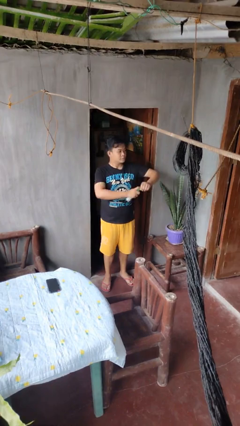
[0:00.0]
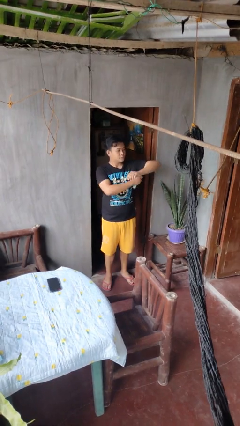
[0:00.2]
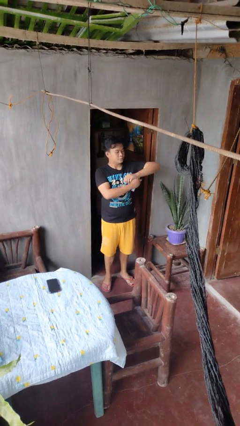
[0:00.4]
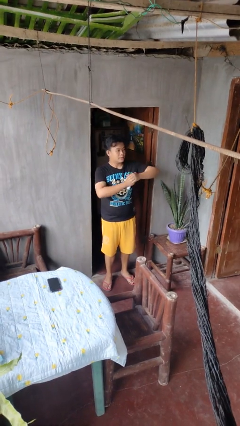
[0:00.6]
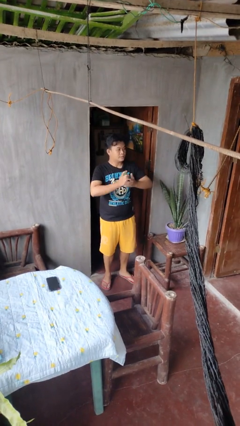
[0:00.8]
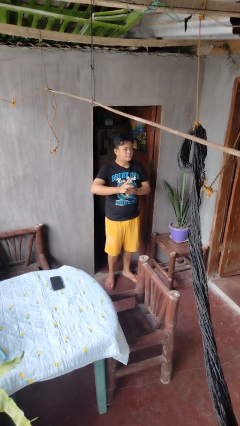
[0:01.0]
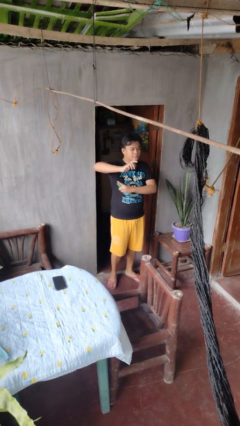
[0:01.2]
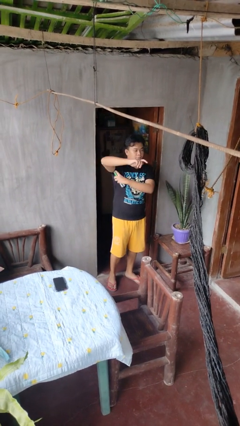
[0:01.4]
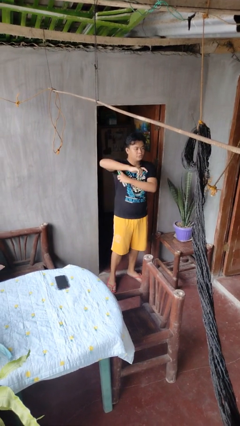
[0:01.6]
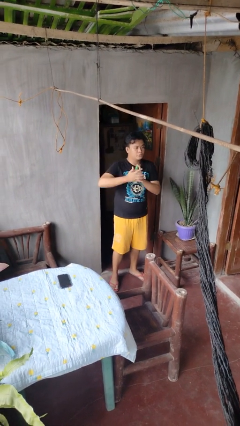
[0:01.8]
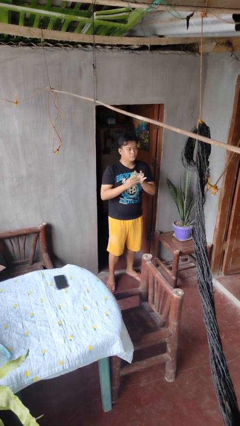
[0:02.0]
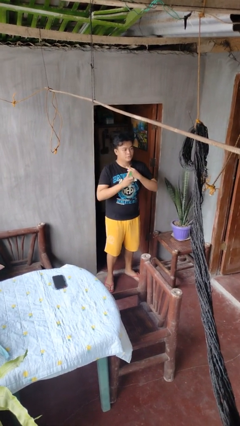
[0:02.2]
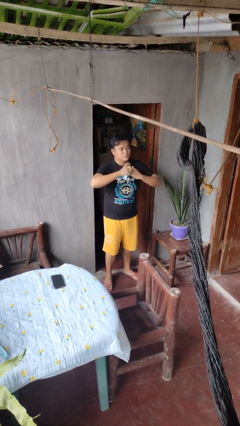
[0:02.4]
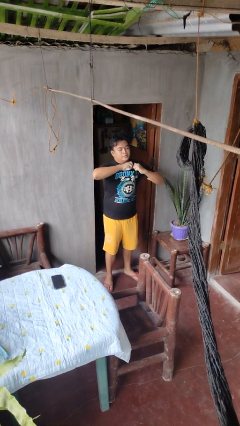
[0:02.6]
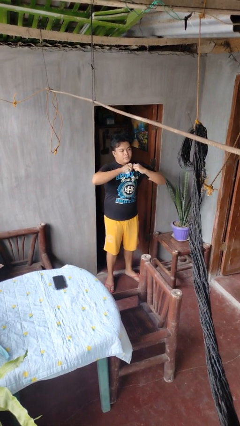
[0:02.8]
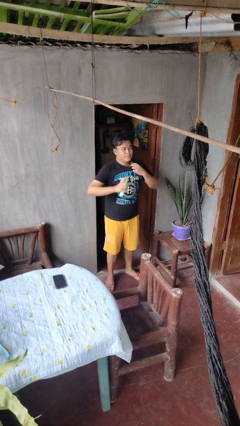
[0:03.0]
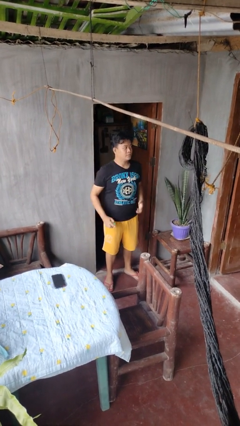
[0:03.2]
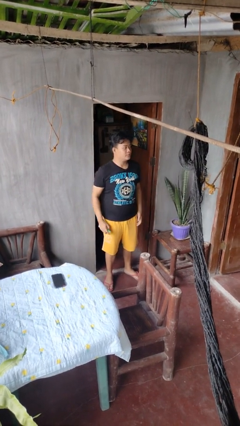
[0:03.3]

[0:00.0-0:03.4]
person applies deodorant

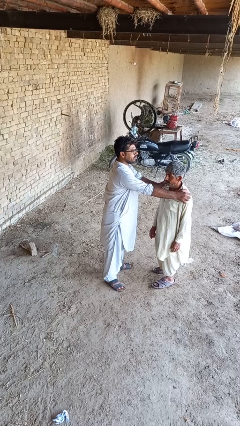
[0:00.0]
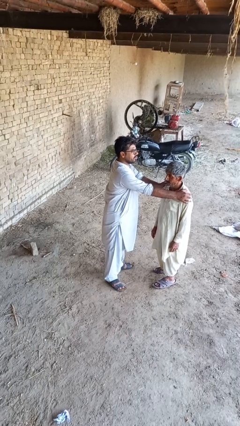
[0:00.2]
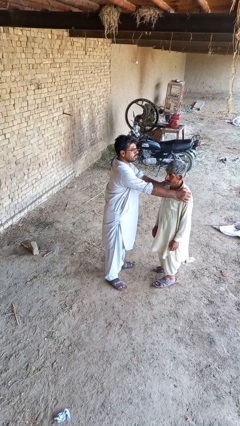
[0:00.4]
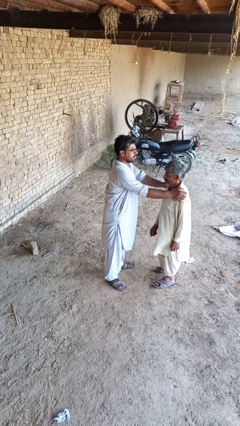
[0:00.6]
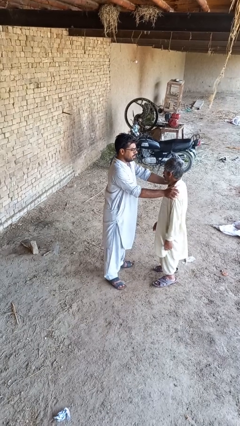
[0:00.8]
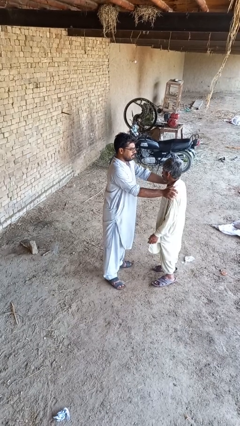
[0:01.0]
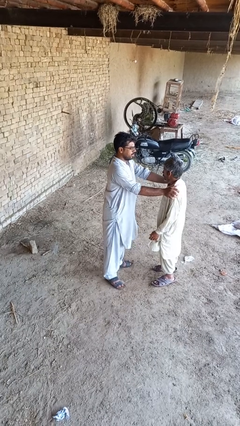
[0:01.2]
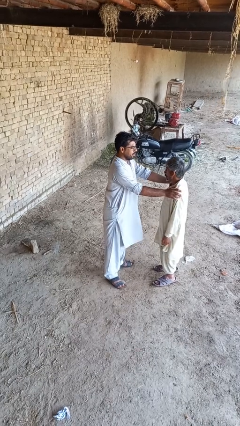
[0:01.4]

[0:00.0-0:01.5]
person spins person around

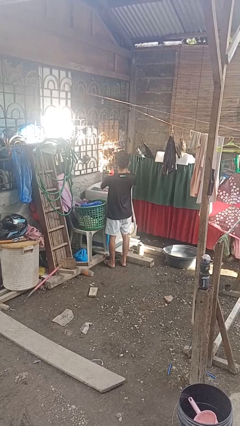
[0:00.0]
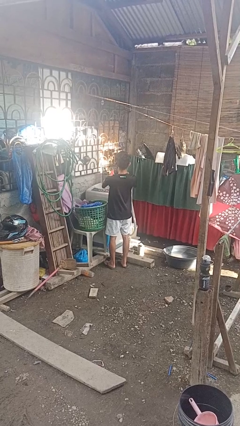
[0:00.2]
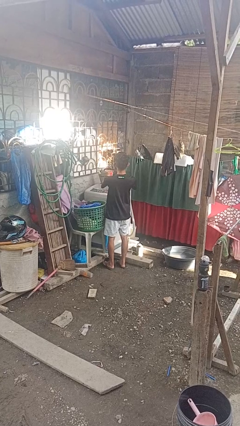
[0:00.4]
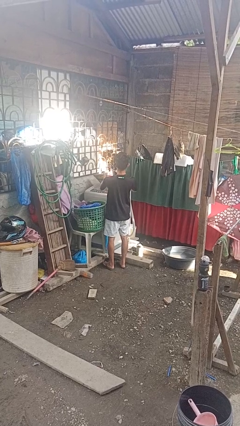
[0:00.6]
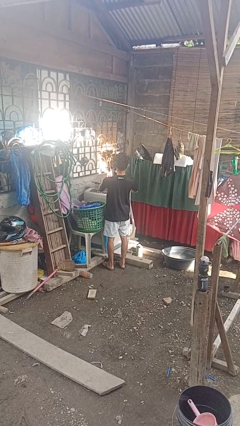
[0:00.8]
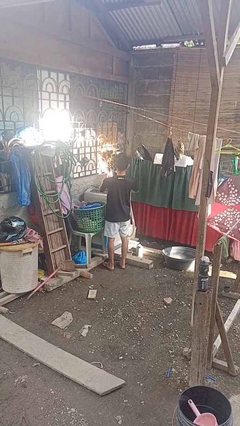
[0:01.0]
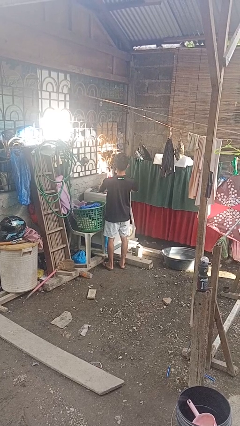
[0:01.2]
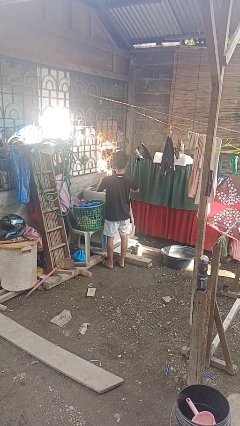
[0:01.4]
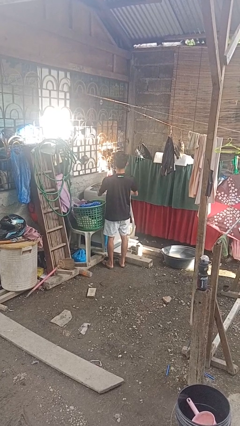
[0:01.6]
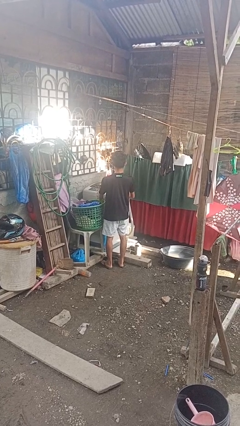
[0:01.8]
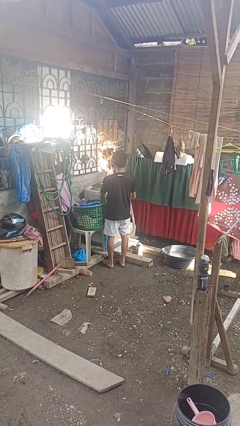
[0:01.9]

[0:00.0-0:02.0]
person closes clothes washer

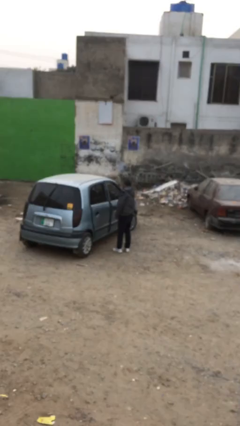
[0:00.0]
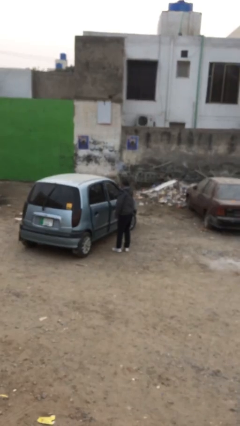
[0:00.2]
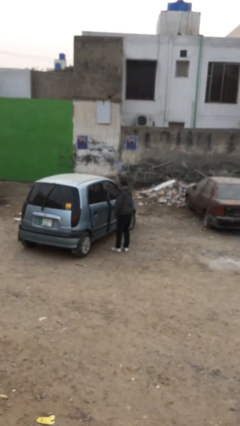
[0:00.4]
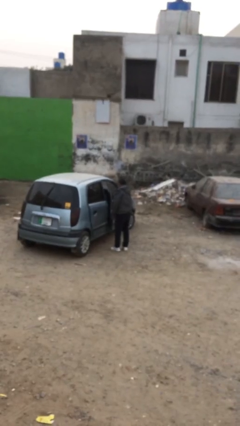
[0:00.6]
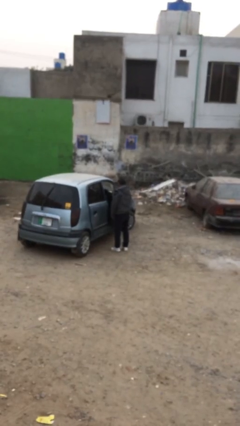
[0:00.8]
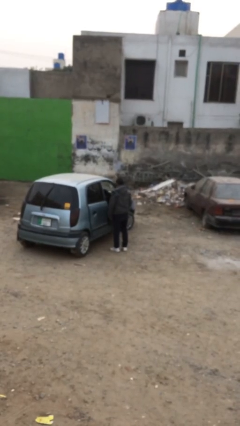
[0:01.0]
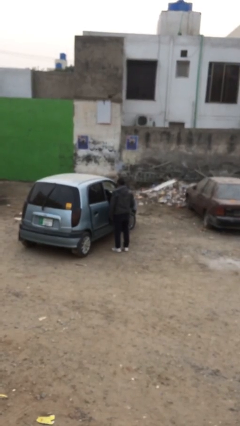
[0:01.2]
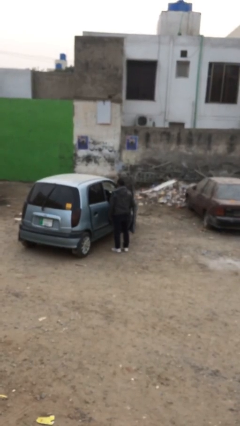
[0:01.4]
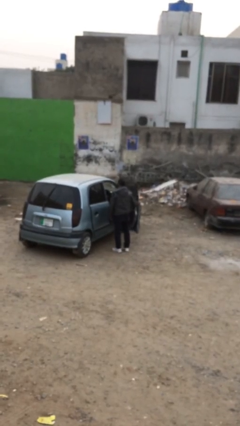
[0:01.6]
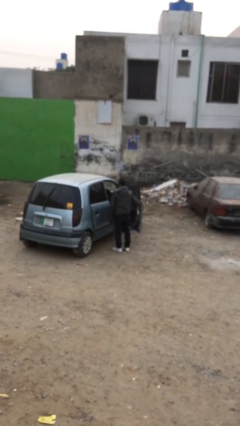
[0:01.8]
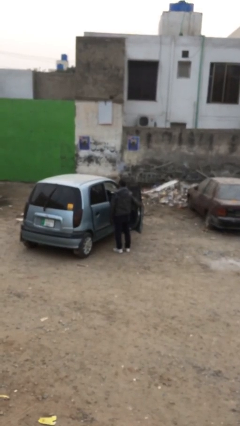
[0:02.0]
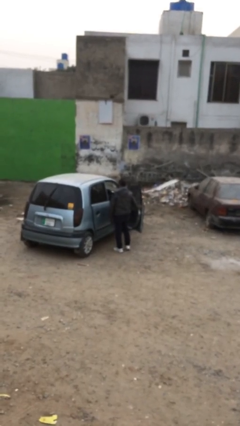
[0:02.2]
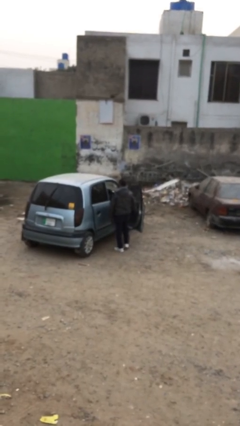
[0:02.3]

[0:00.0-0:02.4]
person opens car door

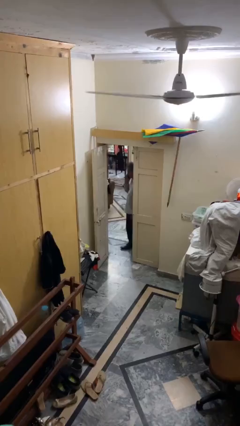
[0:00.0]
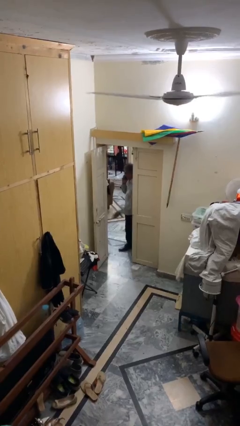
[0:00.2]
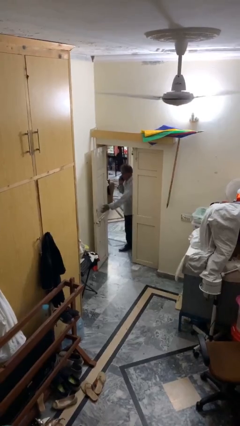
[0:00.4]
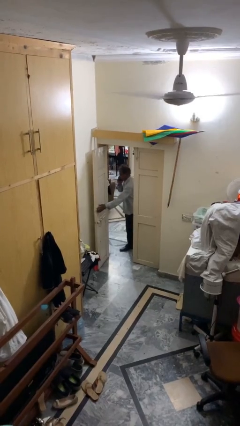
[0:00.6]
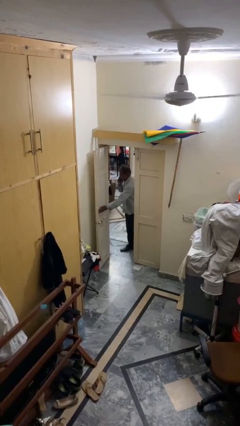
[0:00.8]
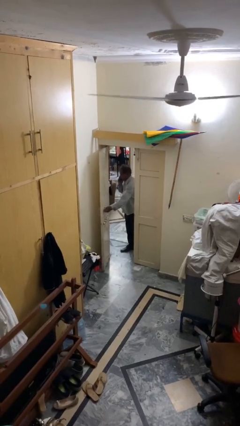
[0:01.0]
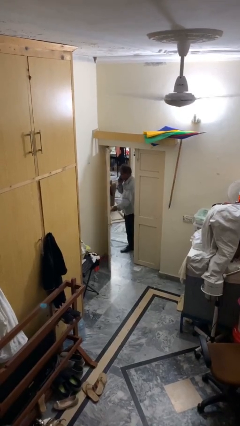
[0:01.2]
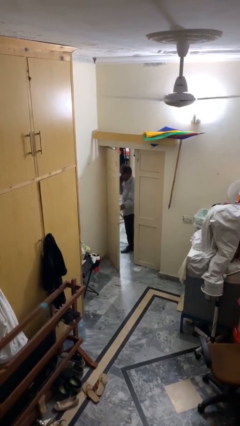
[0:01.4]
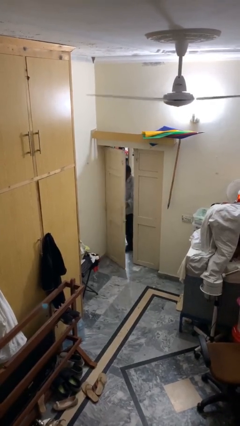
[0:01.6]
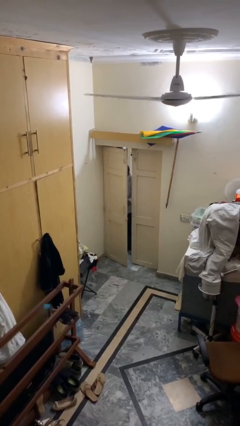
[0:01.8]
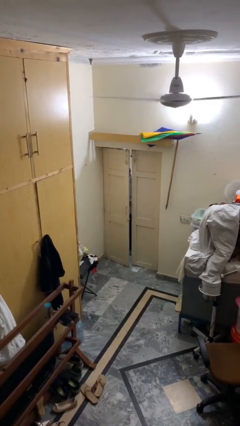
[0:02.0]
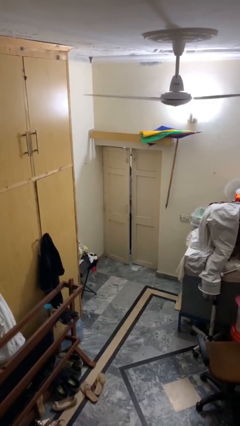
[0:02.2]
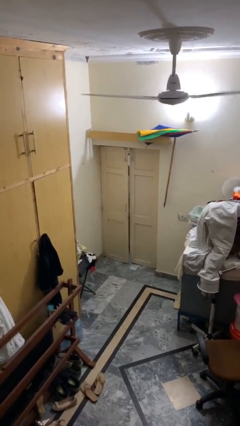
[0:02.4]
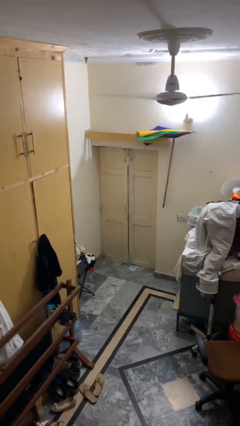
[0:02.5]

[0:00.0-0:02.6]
person closes facility door

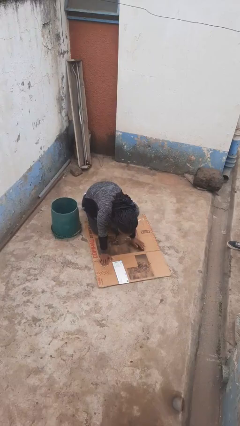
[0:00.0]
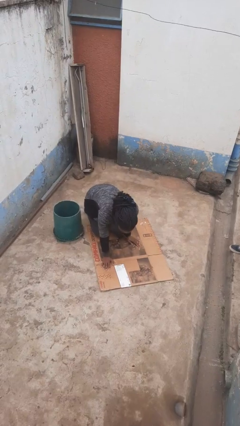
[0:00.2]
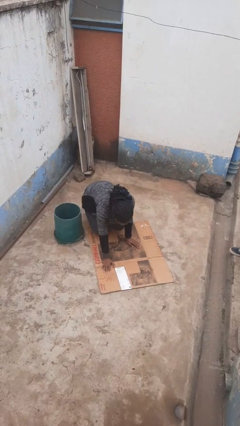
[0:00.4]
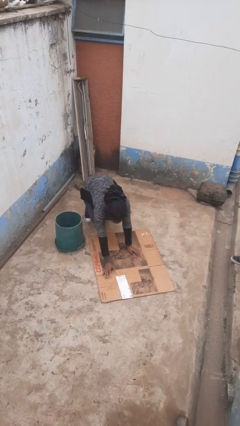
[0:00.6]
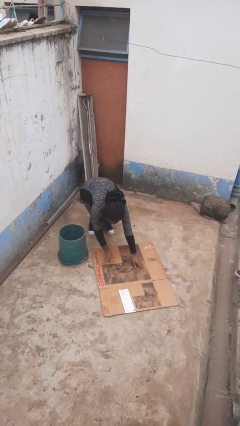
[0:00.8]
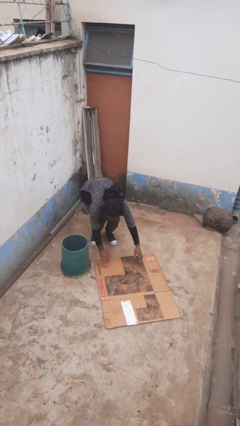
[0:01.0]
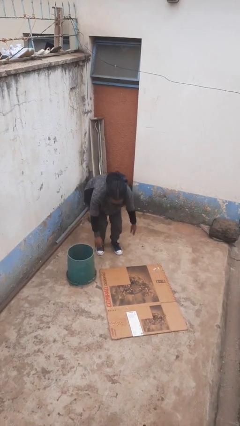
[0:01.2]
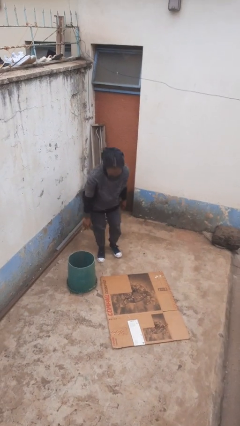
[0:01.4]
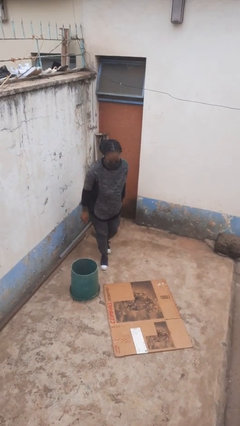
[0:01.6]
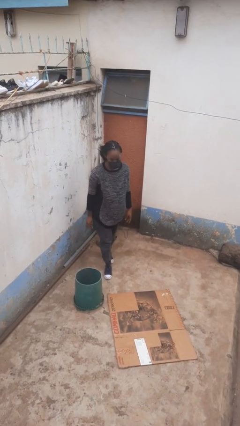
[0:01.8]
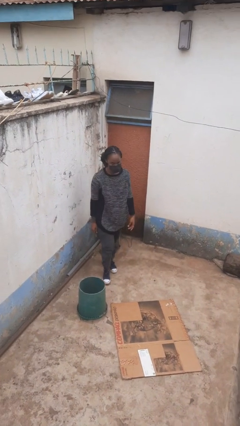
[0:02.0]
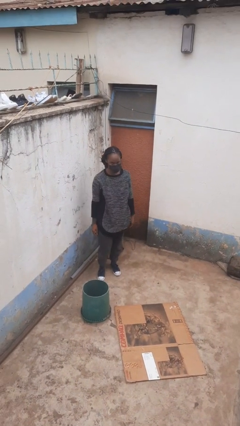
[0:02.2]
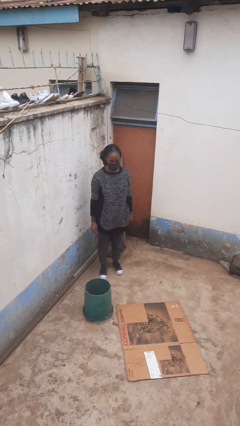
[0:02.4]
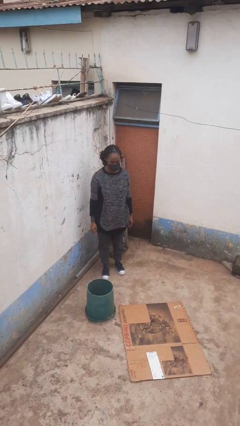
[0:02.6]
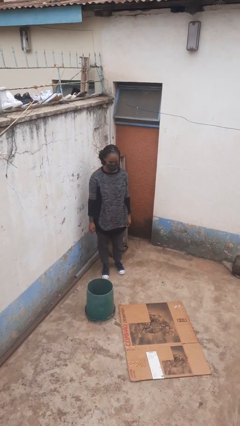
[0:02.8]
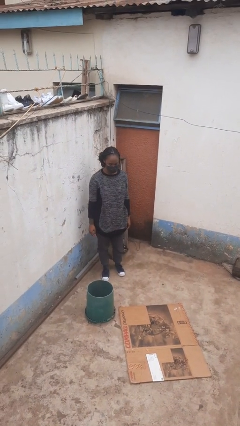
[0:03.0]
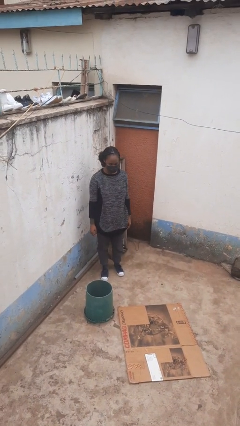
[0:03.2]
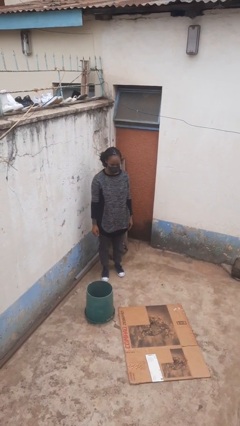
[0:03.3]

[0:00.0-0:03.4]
person stands up from floor

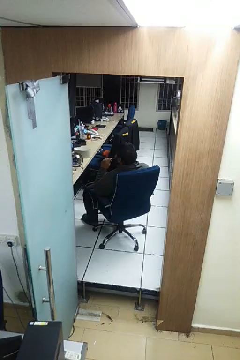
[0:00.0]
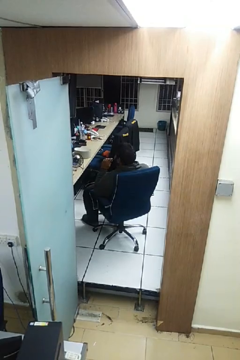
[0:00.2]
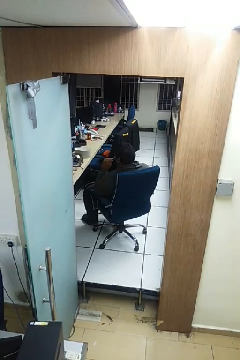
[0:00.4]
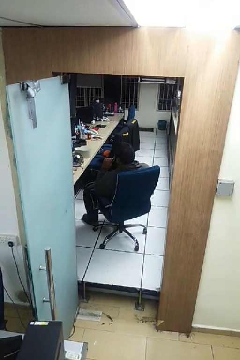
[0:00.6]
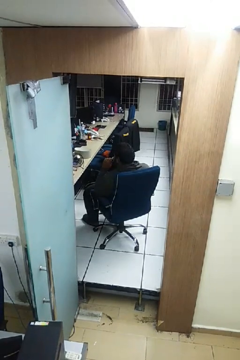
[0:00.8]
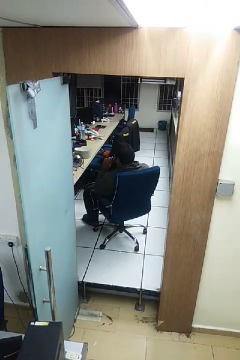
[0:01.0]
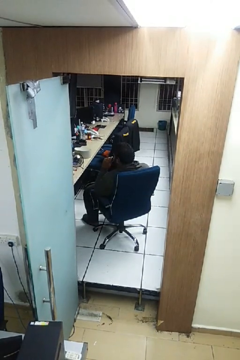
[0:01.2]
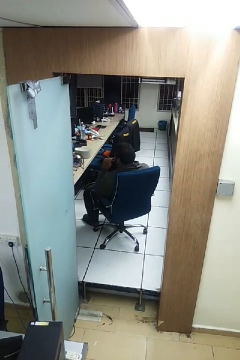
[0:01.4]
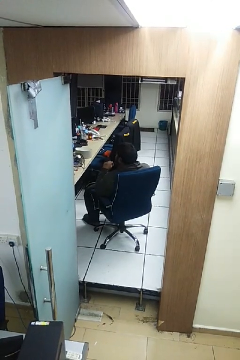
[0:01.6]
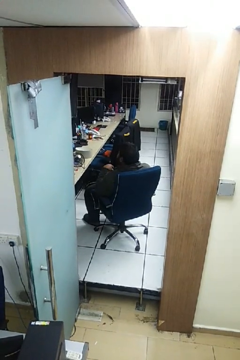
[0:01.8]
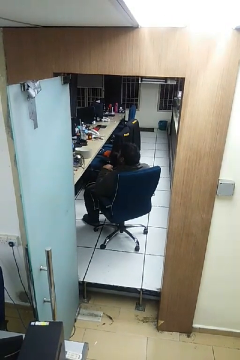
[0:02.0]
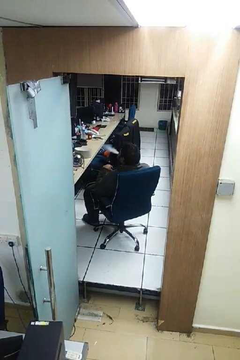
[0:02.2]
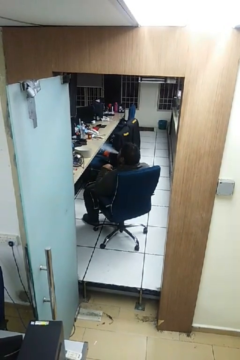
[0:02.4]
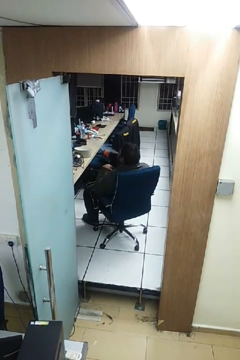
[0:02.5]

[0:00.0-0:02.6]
person vapes
